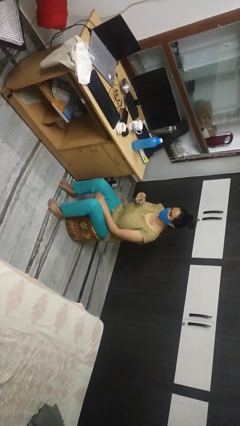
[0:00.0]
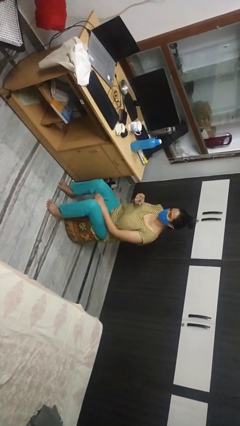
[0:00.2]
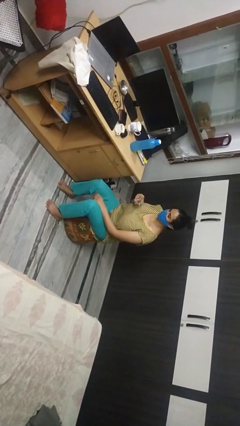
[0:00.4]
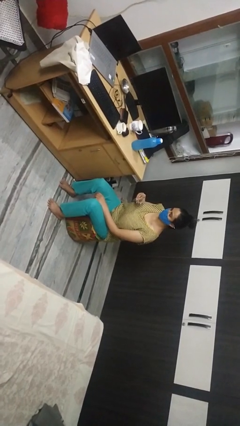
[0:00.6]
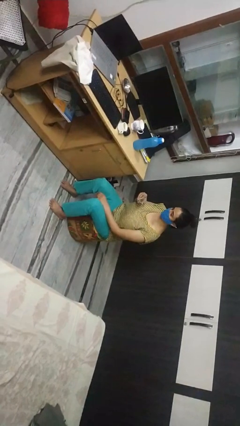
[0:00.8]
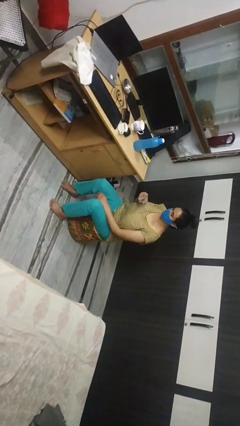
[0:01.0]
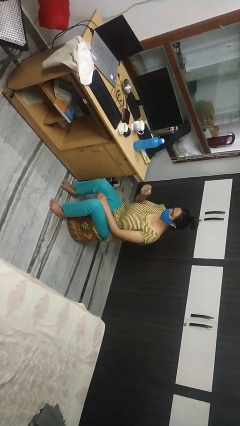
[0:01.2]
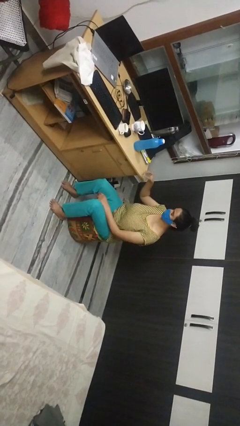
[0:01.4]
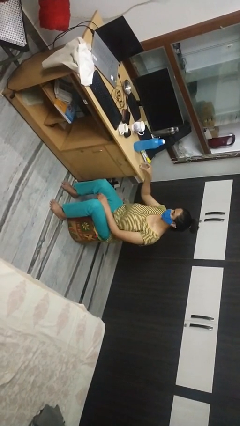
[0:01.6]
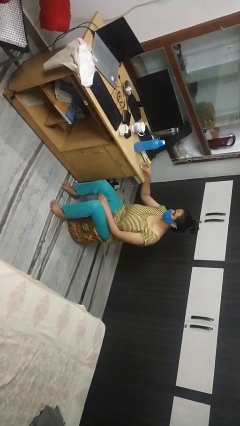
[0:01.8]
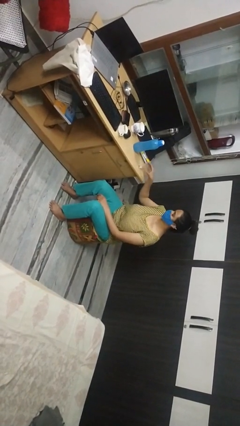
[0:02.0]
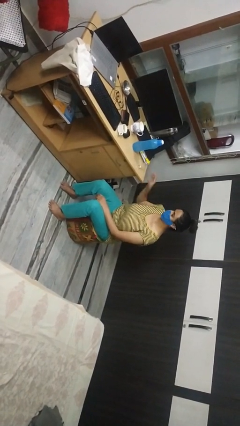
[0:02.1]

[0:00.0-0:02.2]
person puts down object on table

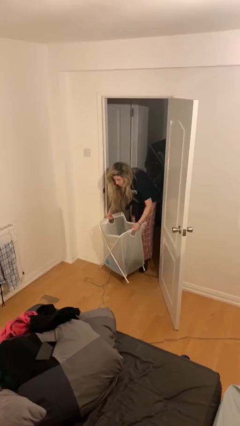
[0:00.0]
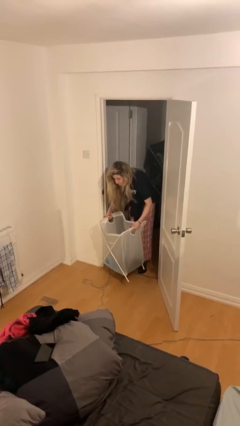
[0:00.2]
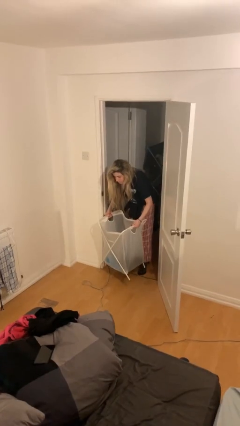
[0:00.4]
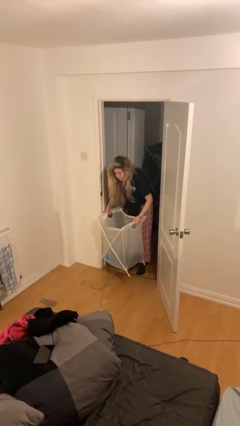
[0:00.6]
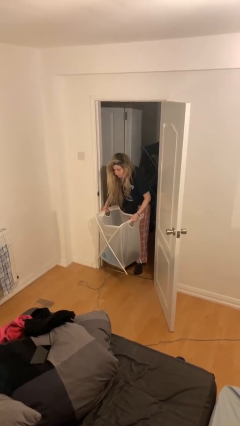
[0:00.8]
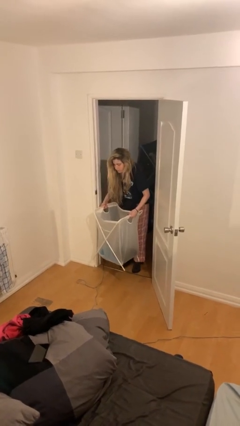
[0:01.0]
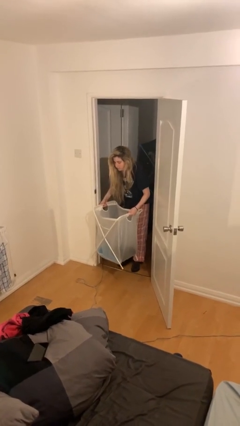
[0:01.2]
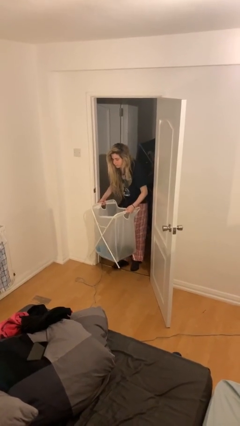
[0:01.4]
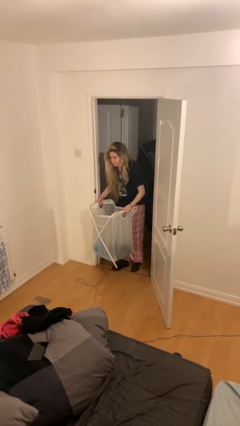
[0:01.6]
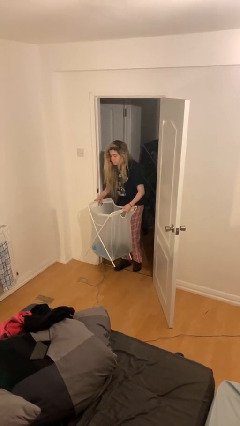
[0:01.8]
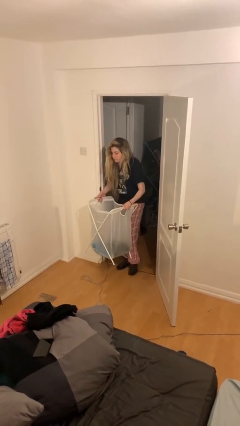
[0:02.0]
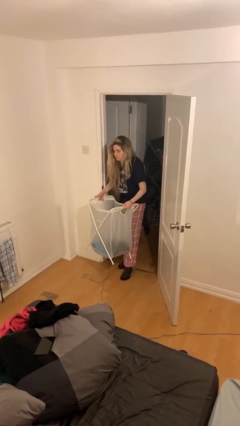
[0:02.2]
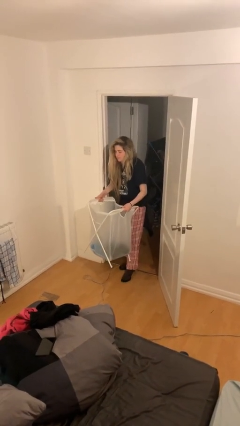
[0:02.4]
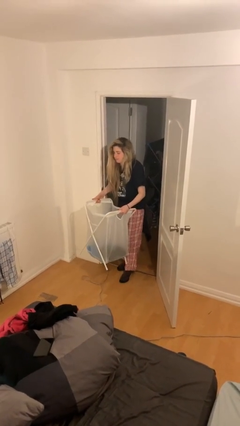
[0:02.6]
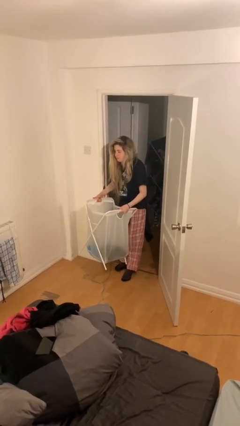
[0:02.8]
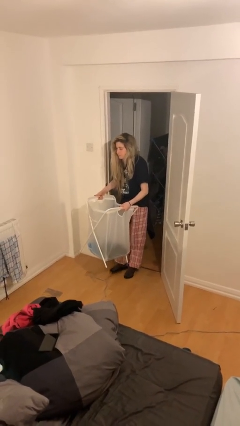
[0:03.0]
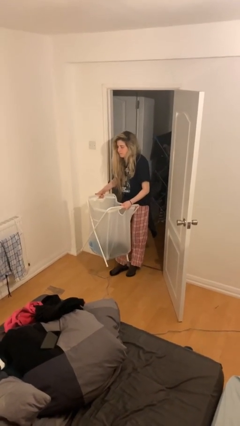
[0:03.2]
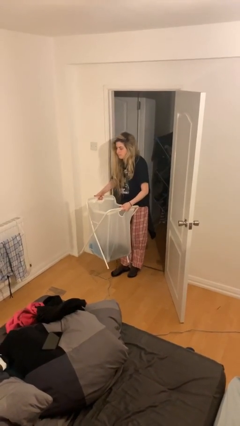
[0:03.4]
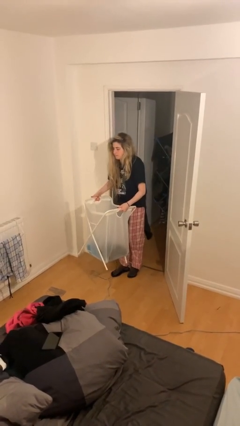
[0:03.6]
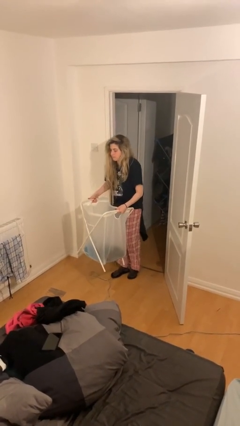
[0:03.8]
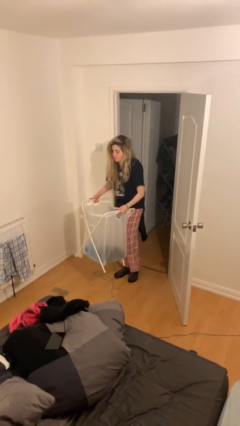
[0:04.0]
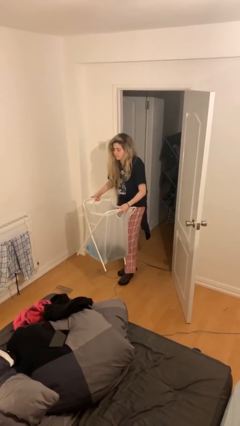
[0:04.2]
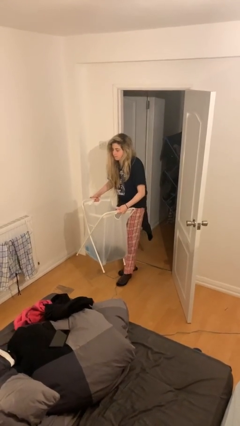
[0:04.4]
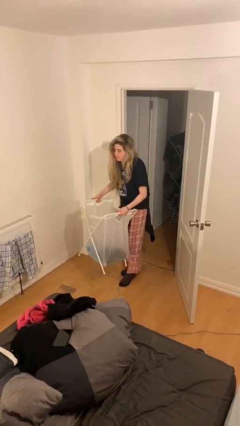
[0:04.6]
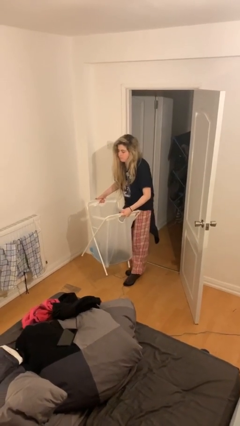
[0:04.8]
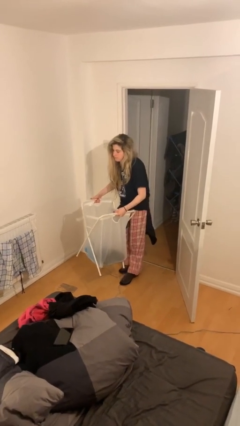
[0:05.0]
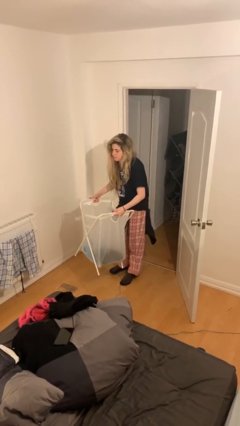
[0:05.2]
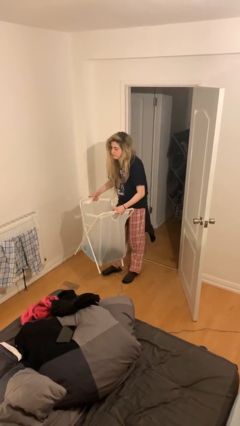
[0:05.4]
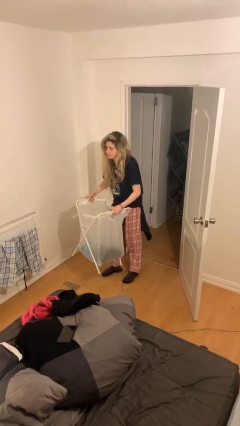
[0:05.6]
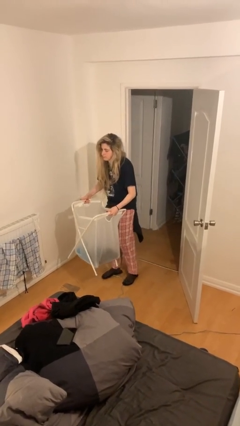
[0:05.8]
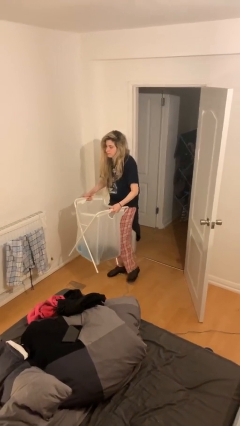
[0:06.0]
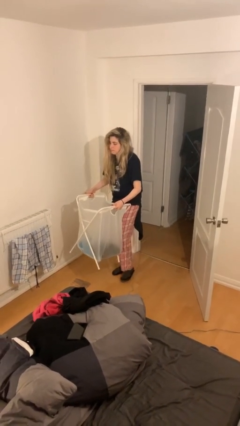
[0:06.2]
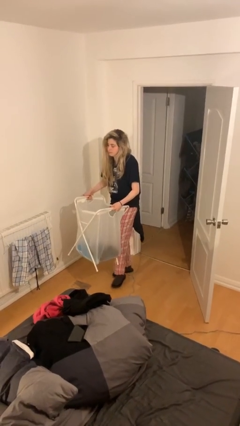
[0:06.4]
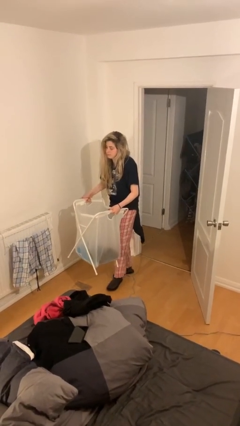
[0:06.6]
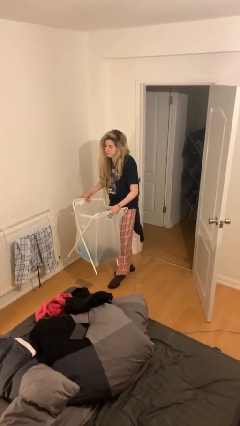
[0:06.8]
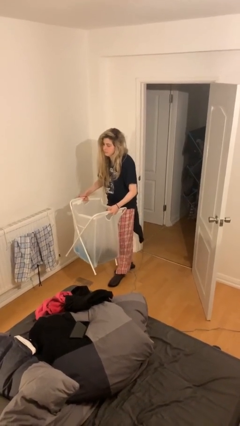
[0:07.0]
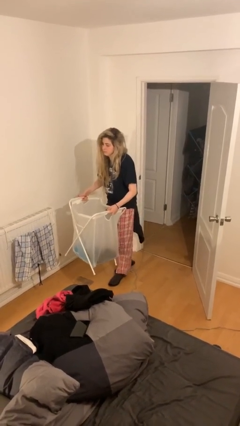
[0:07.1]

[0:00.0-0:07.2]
person carries heavy object

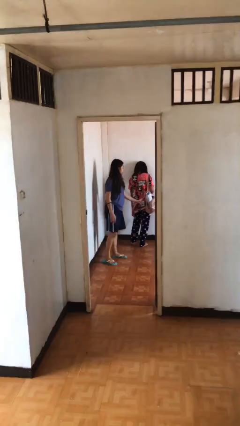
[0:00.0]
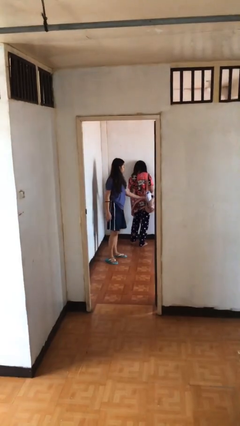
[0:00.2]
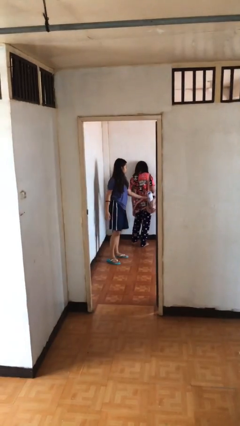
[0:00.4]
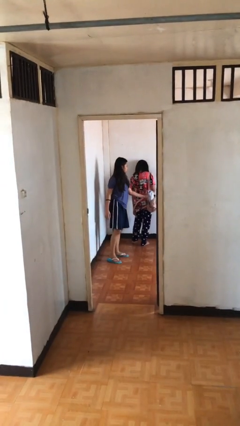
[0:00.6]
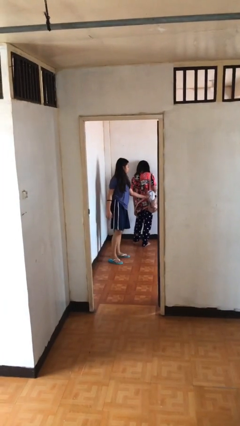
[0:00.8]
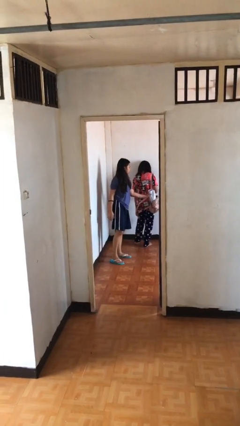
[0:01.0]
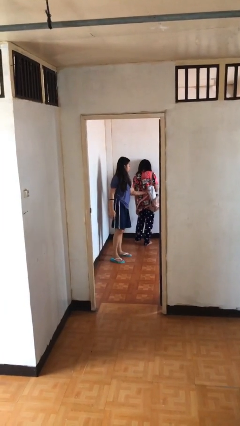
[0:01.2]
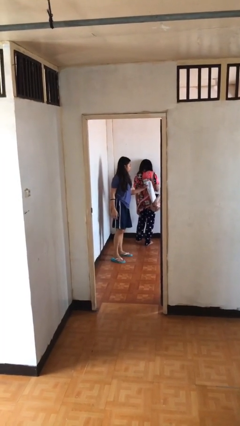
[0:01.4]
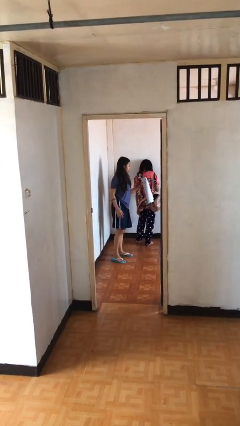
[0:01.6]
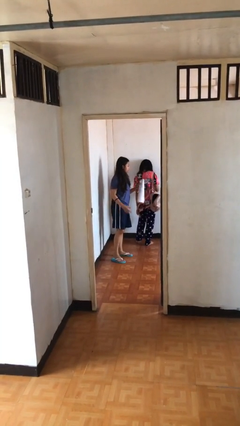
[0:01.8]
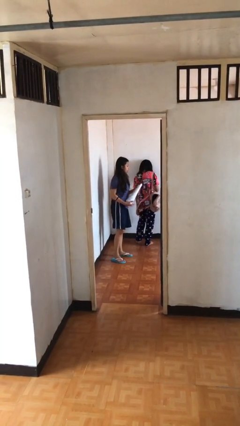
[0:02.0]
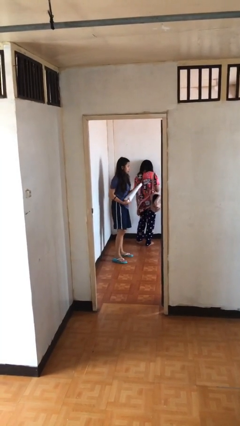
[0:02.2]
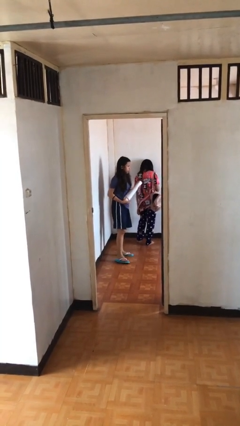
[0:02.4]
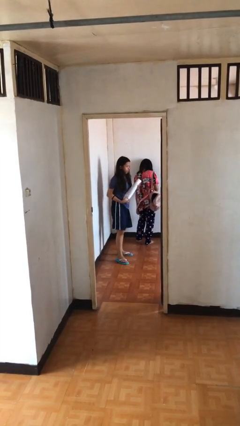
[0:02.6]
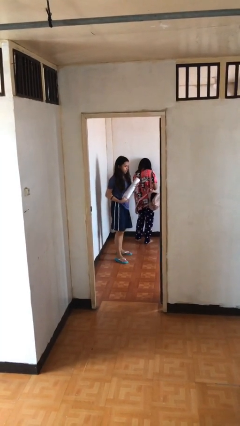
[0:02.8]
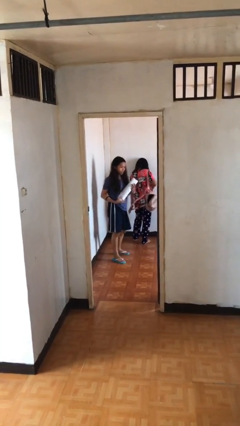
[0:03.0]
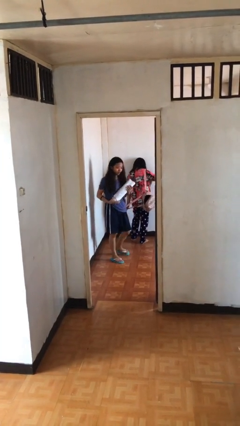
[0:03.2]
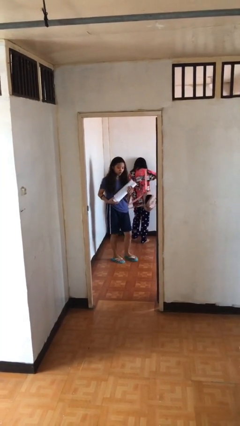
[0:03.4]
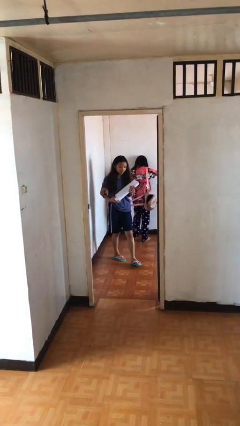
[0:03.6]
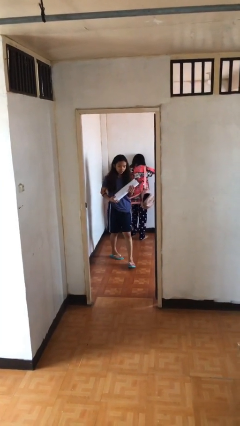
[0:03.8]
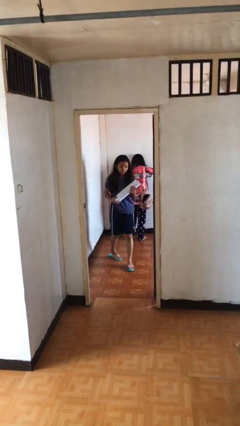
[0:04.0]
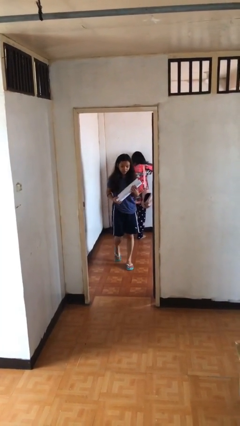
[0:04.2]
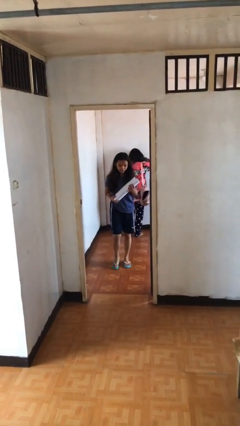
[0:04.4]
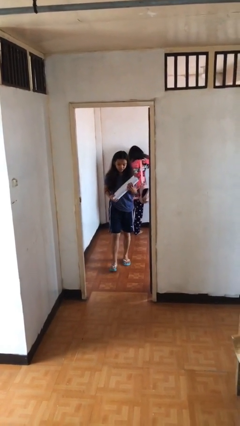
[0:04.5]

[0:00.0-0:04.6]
person steals object from person

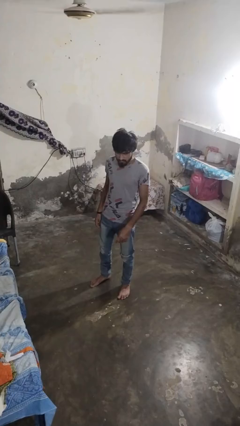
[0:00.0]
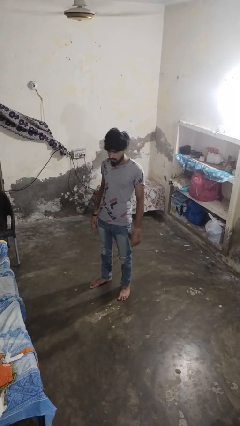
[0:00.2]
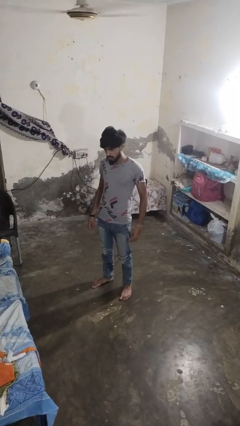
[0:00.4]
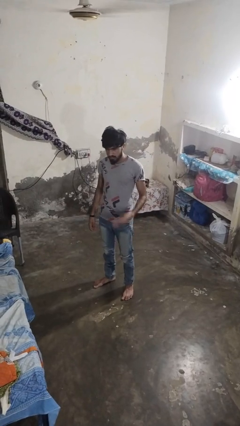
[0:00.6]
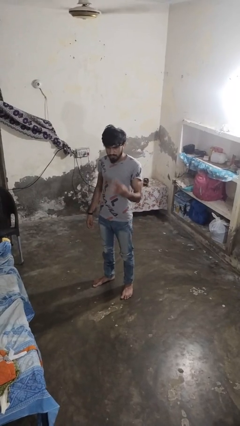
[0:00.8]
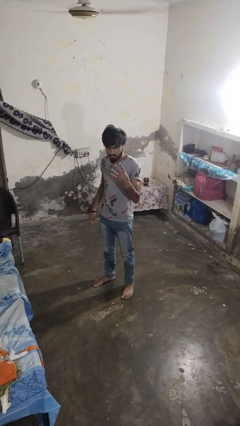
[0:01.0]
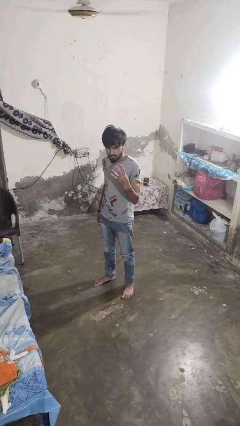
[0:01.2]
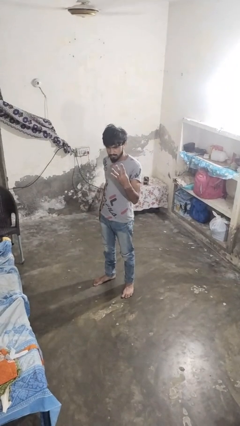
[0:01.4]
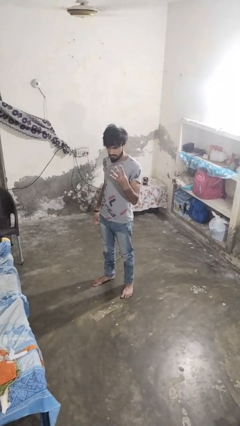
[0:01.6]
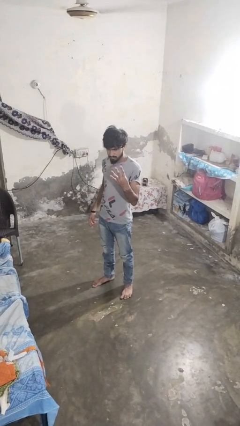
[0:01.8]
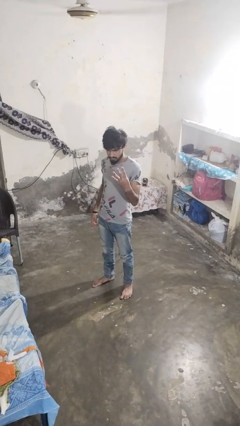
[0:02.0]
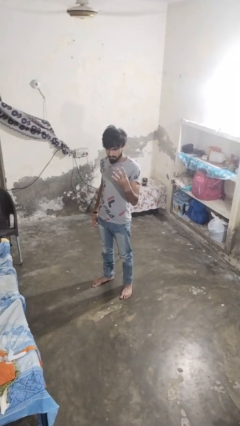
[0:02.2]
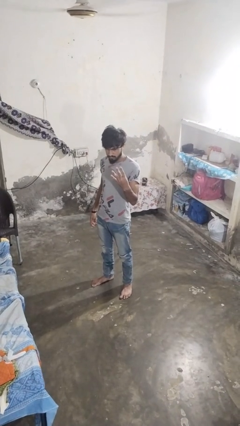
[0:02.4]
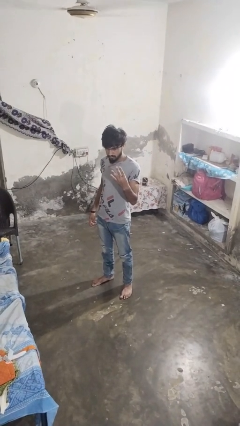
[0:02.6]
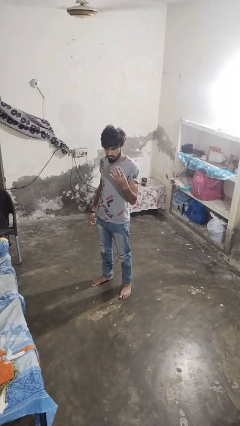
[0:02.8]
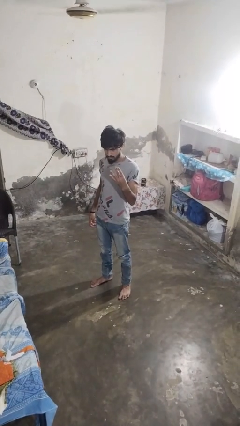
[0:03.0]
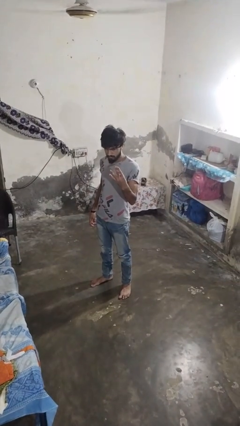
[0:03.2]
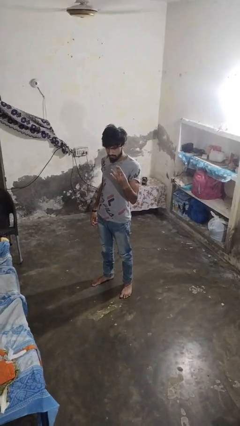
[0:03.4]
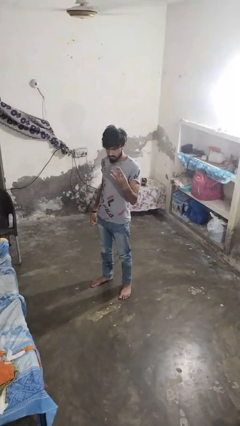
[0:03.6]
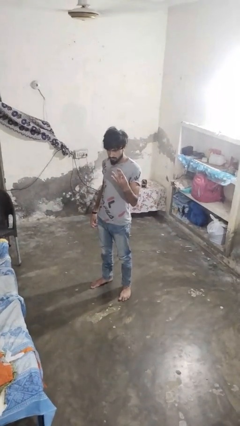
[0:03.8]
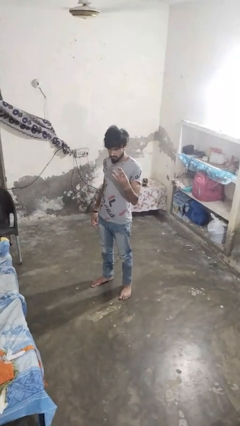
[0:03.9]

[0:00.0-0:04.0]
person gestures number four
